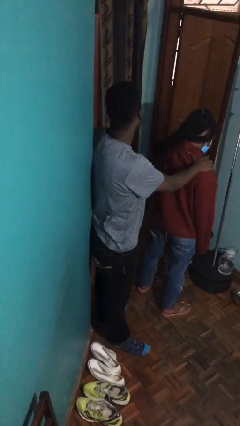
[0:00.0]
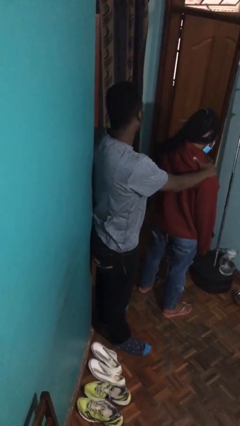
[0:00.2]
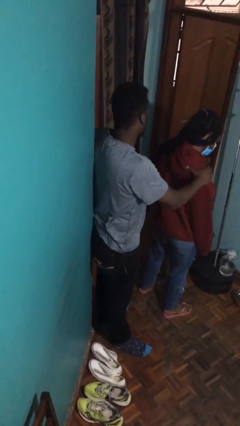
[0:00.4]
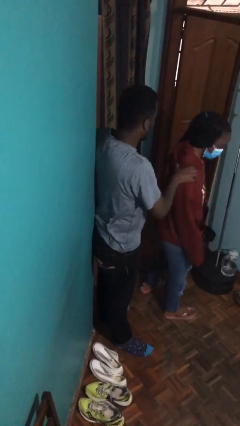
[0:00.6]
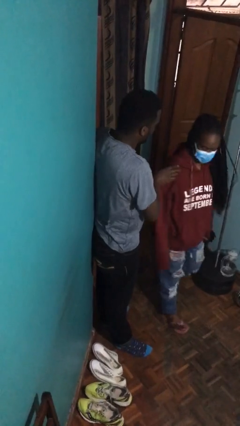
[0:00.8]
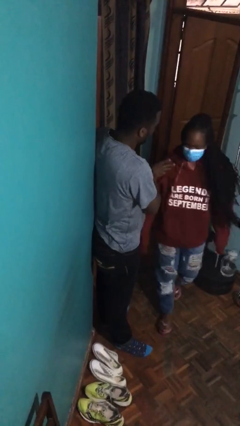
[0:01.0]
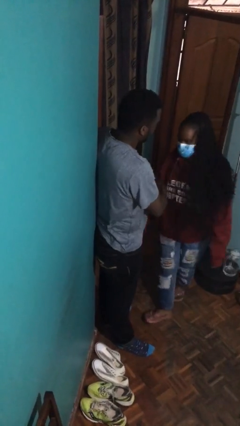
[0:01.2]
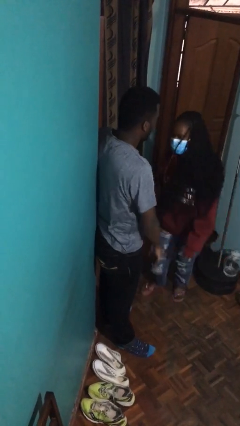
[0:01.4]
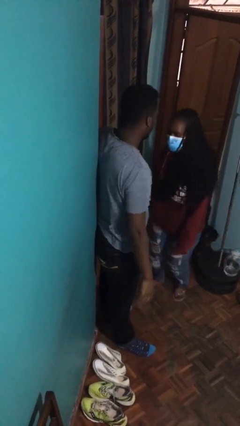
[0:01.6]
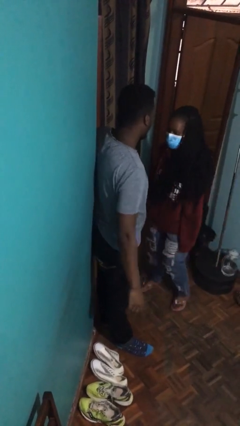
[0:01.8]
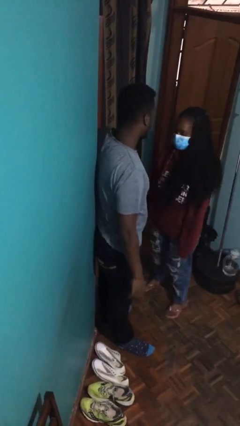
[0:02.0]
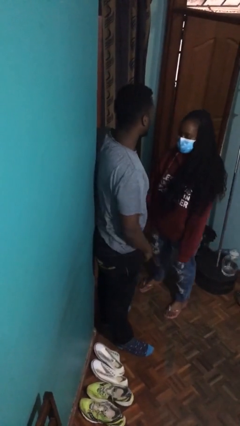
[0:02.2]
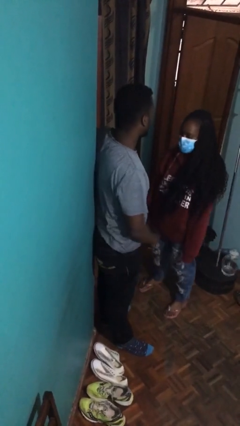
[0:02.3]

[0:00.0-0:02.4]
person spins person around

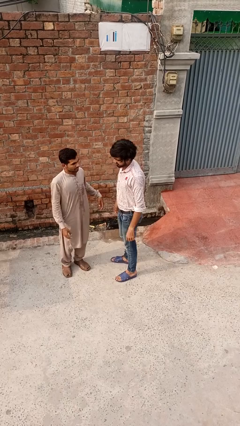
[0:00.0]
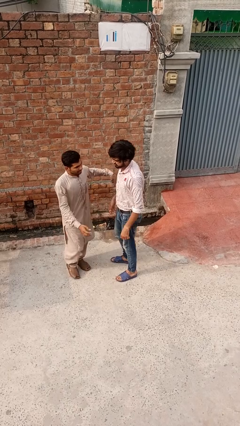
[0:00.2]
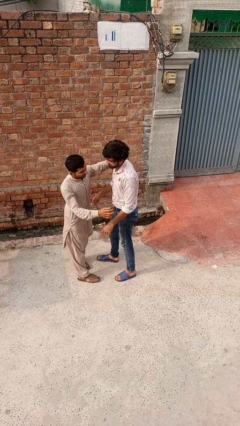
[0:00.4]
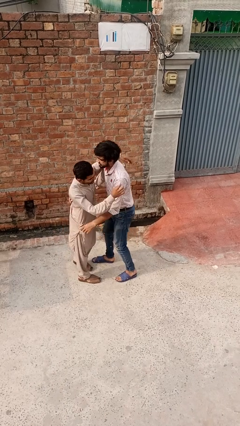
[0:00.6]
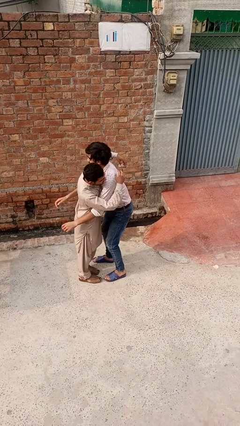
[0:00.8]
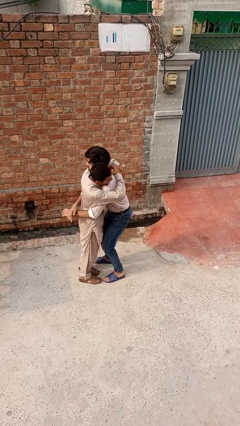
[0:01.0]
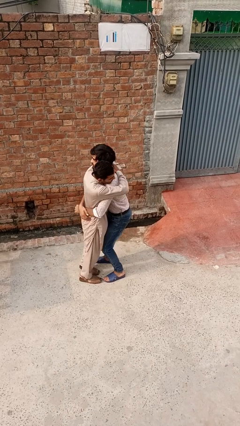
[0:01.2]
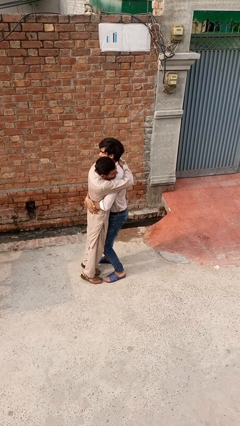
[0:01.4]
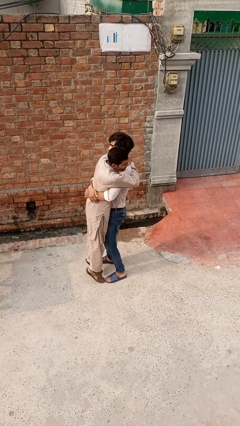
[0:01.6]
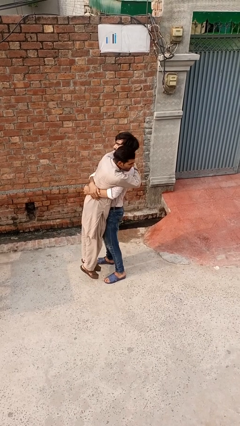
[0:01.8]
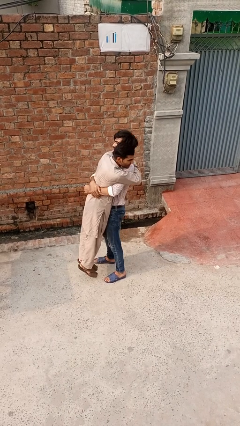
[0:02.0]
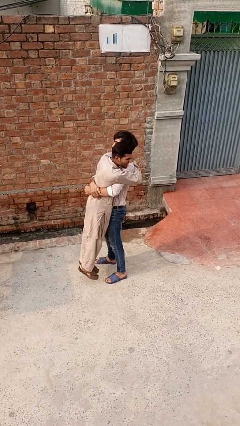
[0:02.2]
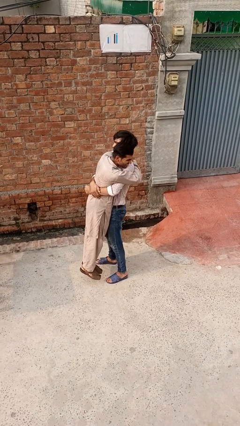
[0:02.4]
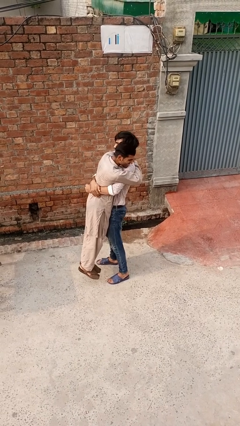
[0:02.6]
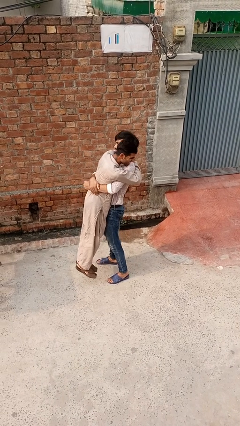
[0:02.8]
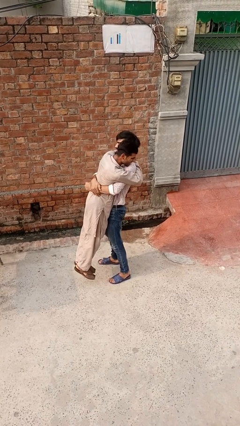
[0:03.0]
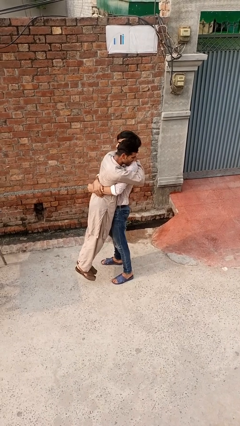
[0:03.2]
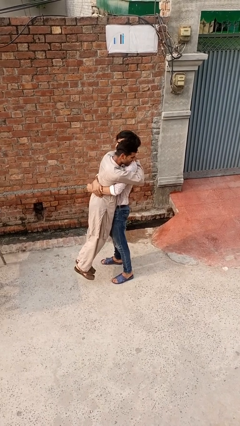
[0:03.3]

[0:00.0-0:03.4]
person picks up person

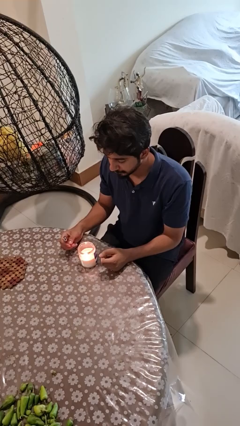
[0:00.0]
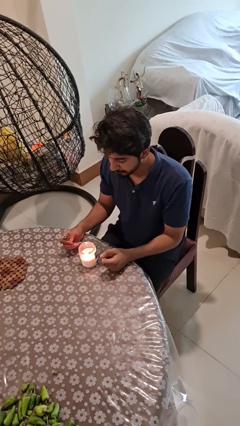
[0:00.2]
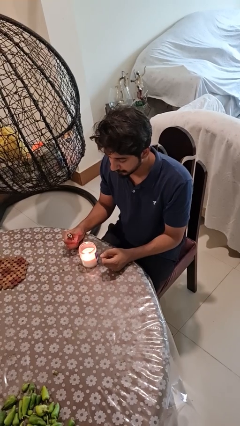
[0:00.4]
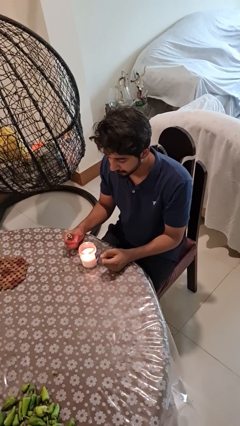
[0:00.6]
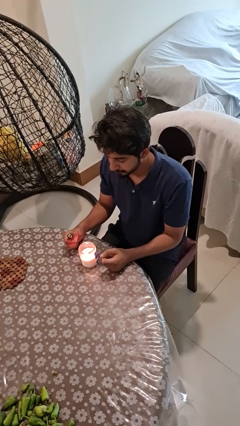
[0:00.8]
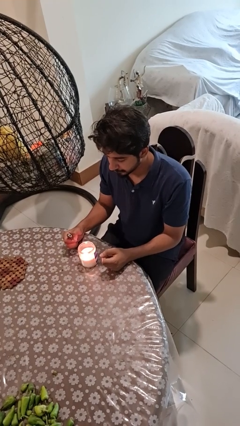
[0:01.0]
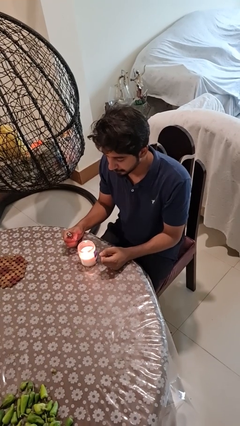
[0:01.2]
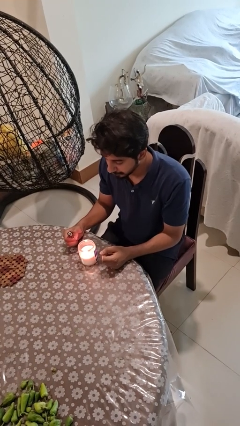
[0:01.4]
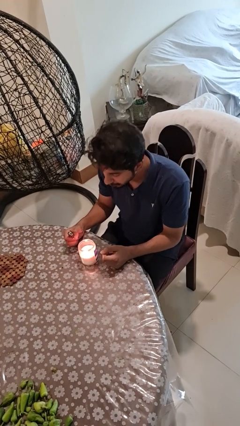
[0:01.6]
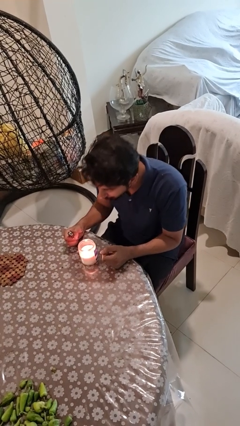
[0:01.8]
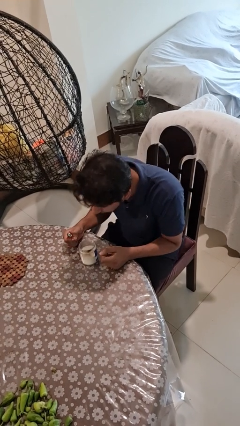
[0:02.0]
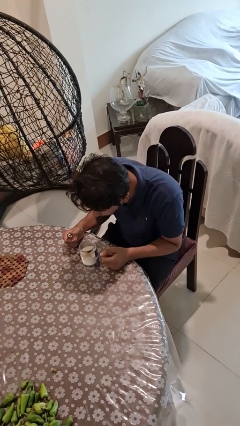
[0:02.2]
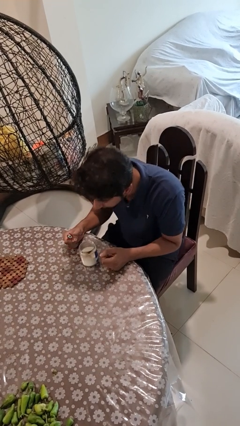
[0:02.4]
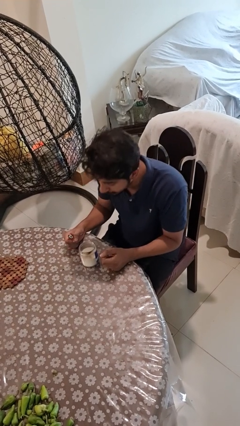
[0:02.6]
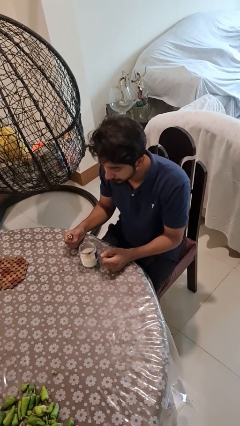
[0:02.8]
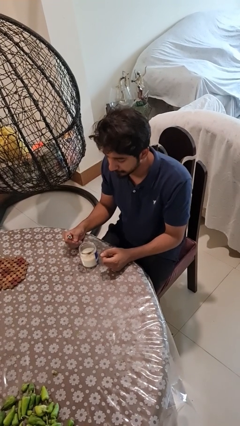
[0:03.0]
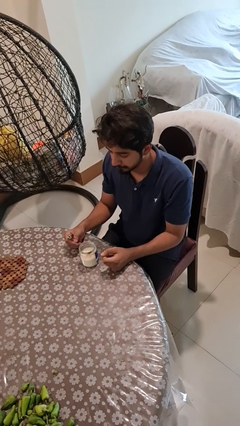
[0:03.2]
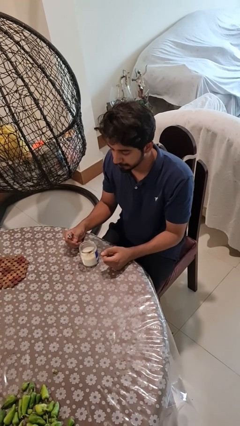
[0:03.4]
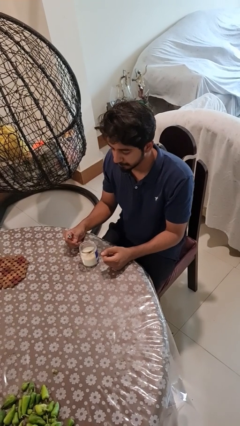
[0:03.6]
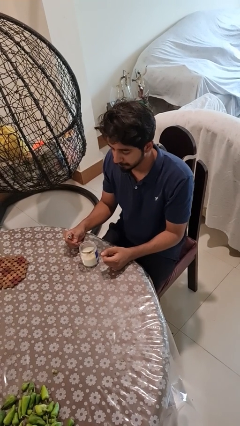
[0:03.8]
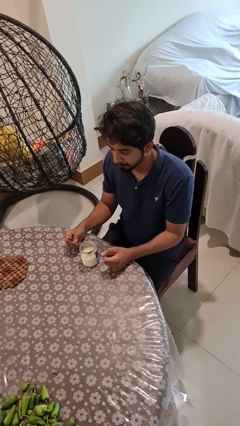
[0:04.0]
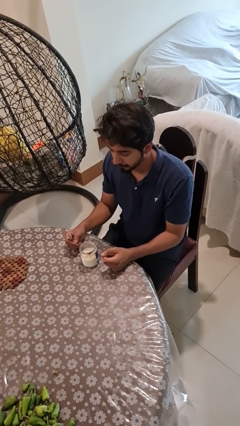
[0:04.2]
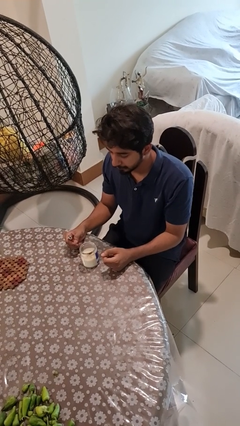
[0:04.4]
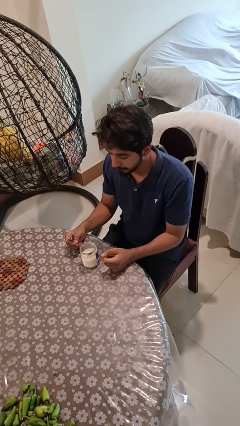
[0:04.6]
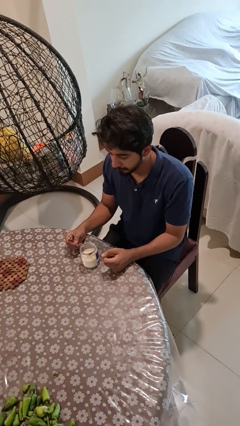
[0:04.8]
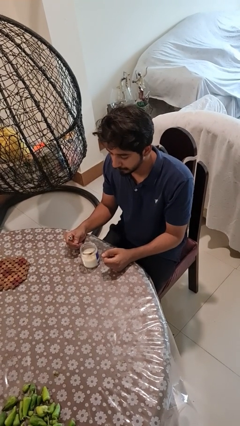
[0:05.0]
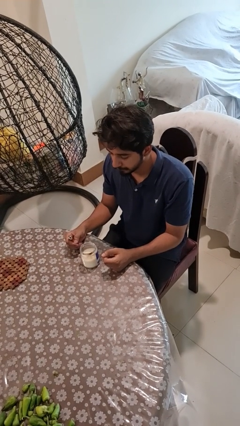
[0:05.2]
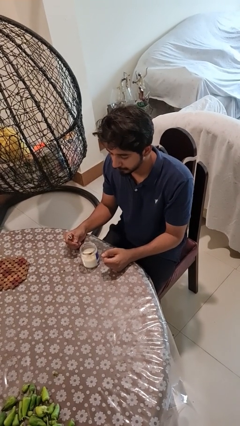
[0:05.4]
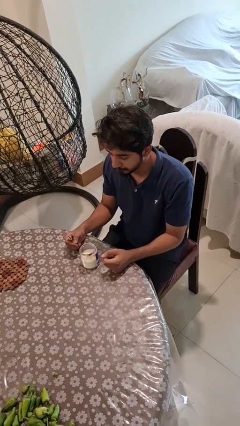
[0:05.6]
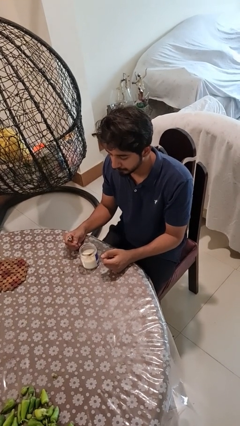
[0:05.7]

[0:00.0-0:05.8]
person extinguishes candle

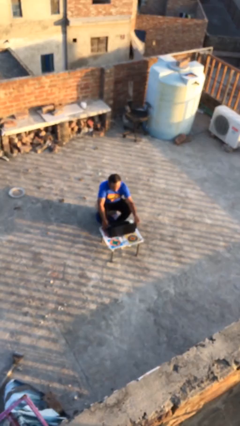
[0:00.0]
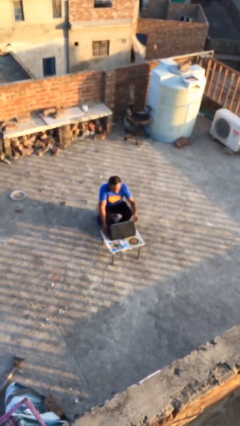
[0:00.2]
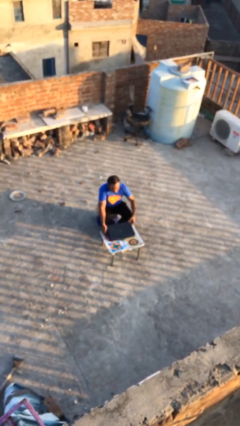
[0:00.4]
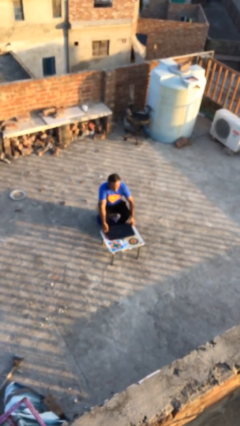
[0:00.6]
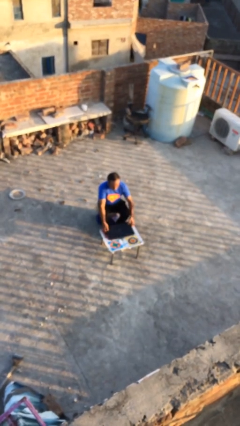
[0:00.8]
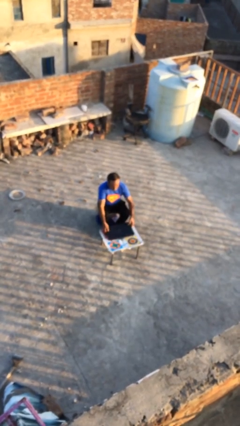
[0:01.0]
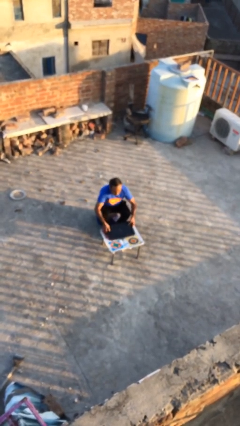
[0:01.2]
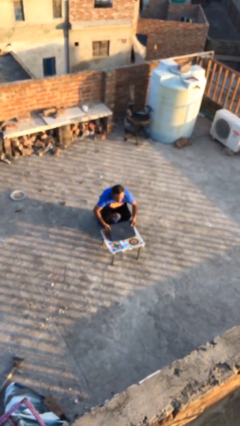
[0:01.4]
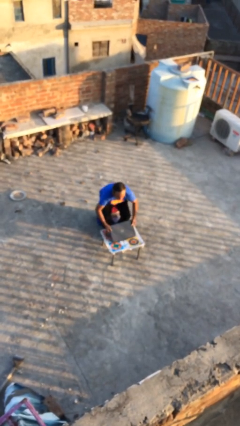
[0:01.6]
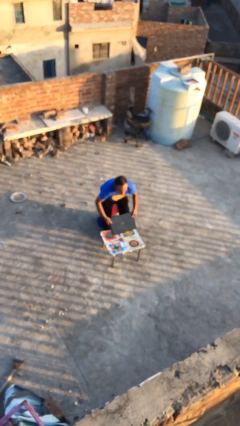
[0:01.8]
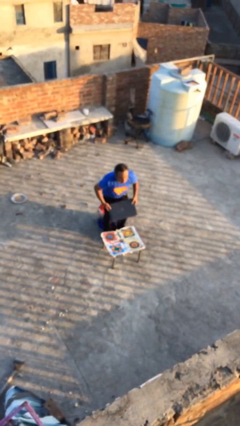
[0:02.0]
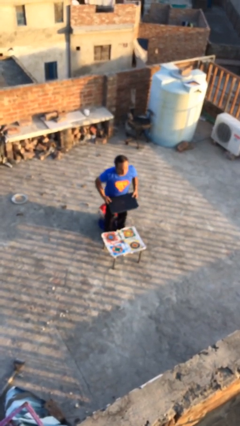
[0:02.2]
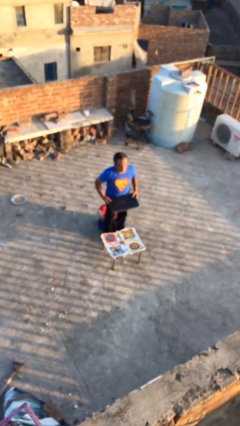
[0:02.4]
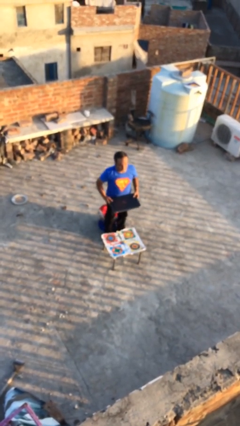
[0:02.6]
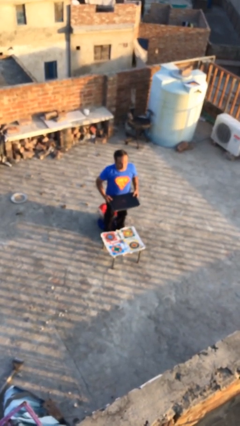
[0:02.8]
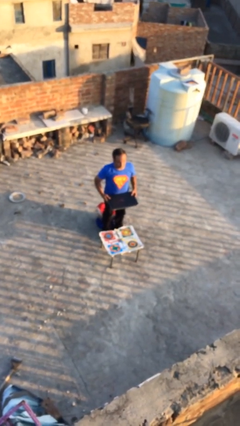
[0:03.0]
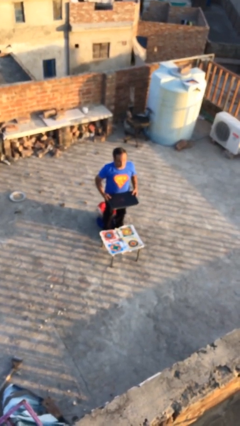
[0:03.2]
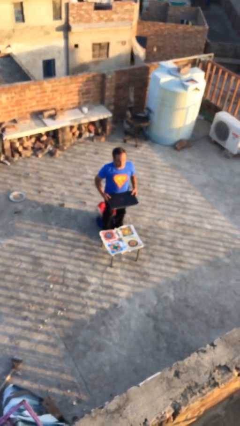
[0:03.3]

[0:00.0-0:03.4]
person stands up

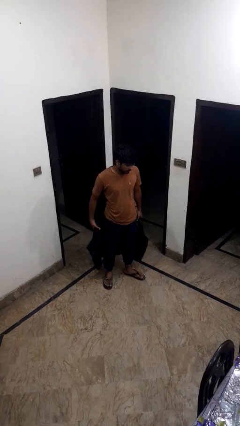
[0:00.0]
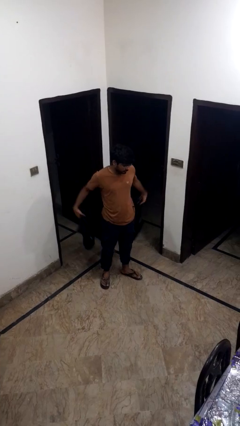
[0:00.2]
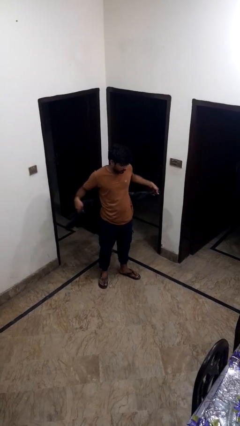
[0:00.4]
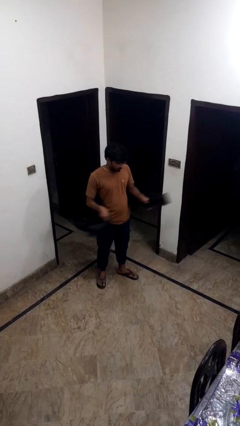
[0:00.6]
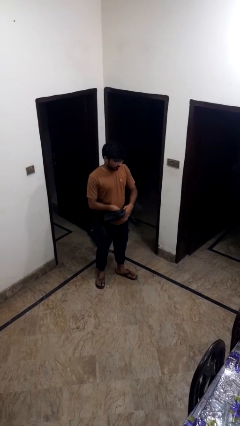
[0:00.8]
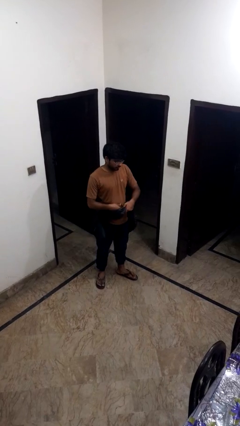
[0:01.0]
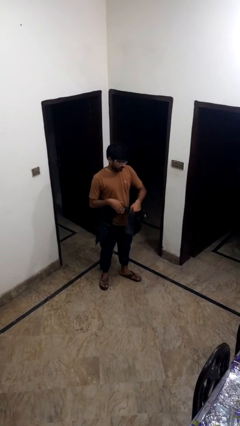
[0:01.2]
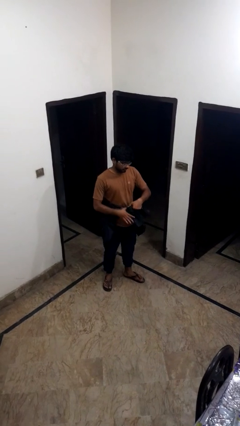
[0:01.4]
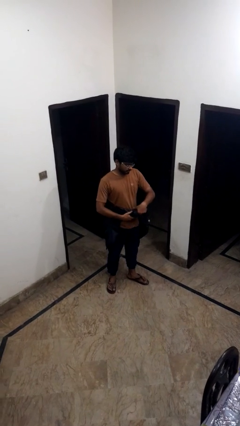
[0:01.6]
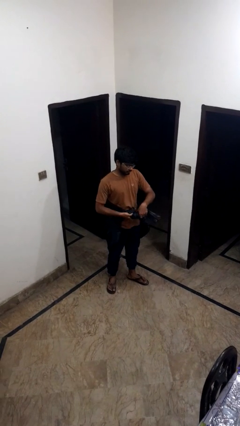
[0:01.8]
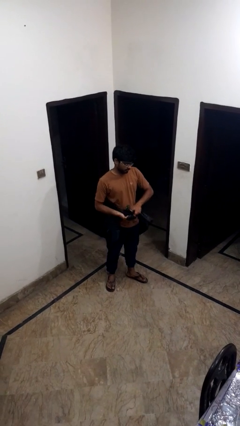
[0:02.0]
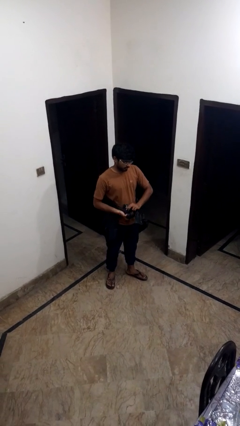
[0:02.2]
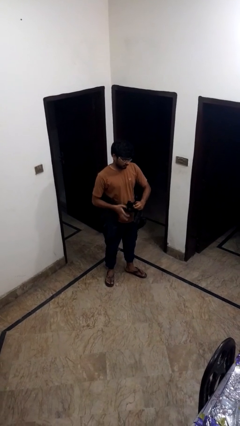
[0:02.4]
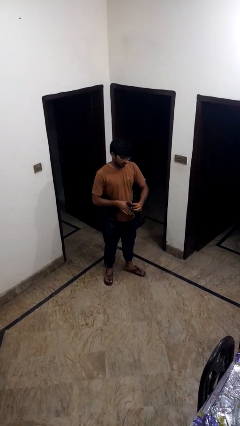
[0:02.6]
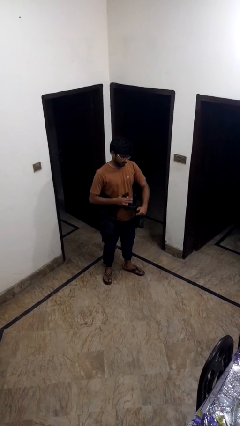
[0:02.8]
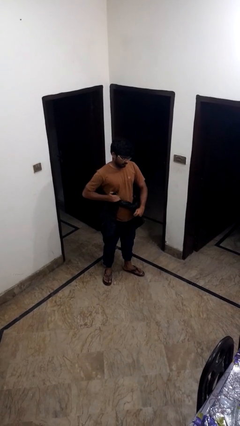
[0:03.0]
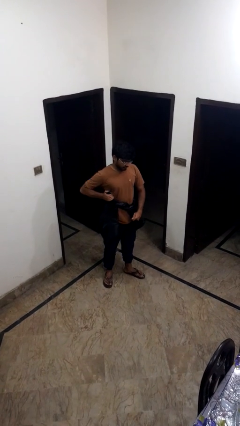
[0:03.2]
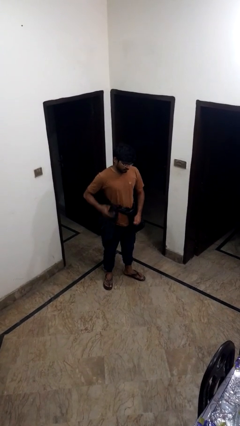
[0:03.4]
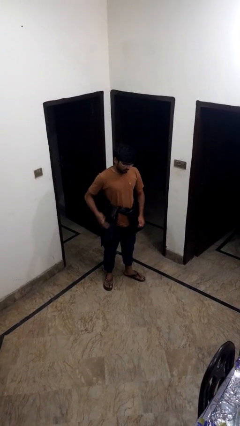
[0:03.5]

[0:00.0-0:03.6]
person carries bicycle
